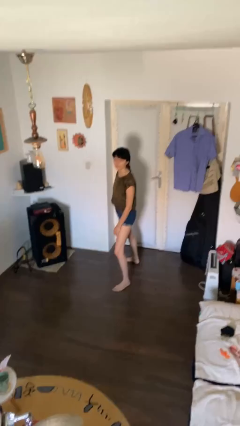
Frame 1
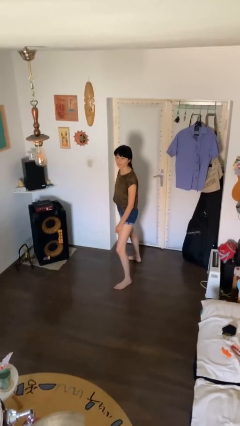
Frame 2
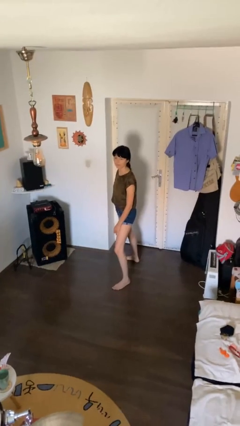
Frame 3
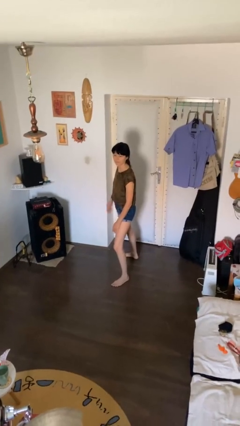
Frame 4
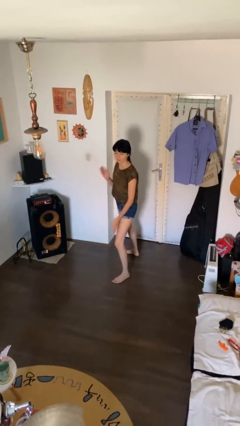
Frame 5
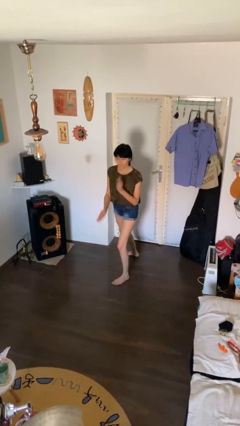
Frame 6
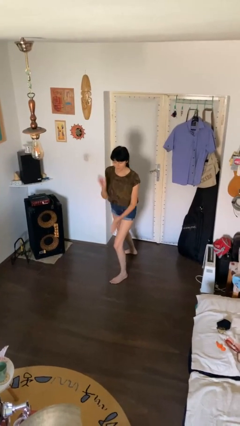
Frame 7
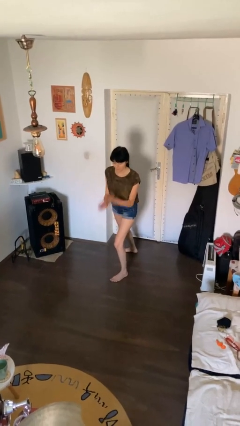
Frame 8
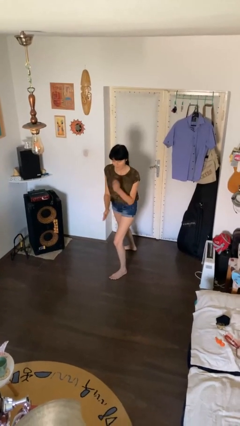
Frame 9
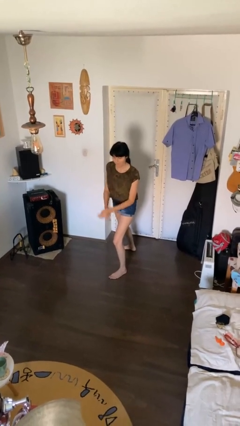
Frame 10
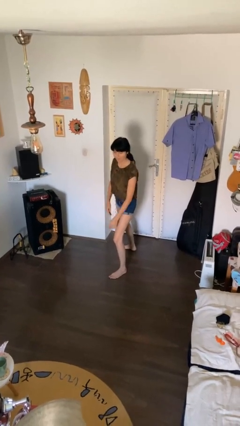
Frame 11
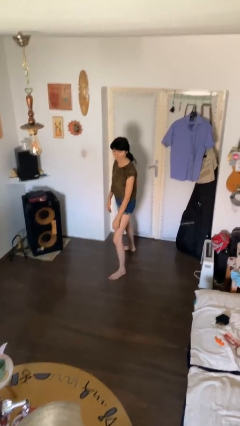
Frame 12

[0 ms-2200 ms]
person karate chop

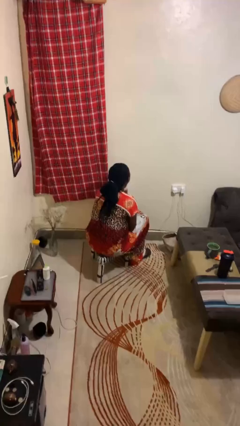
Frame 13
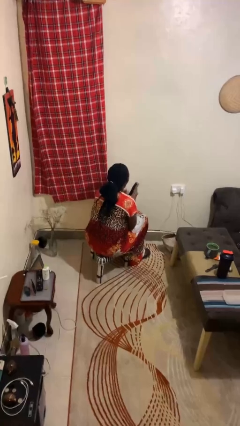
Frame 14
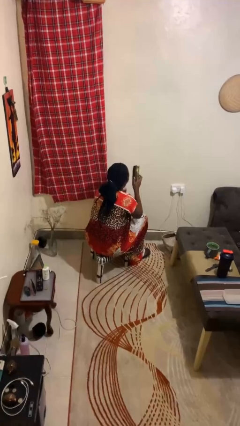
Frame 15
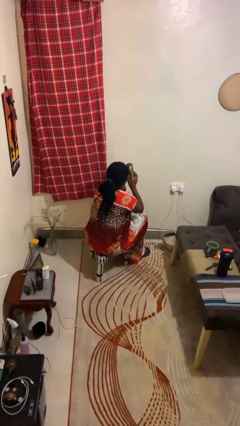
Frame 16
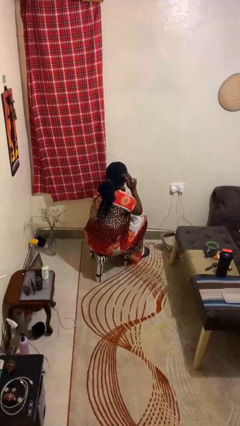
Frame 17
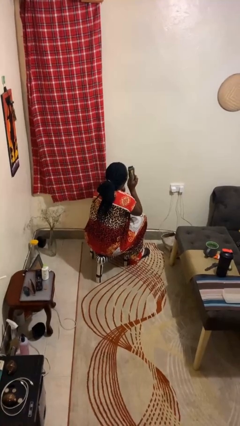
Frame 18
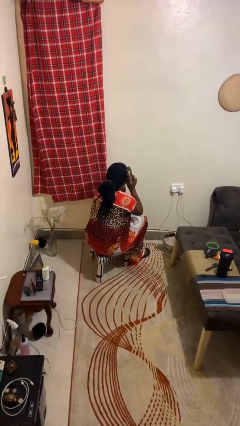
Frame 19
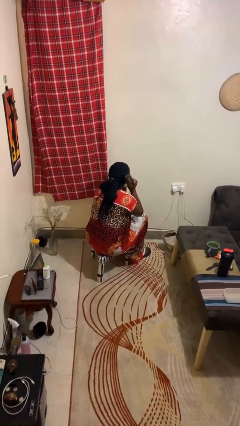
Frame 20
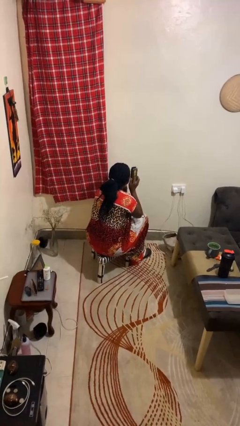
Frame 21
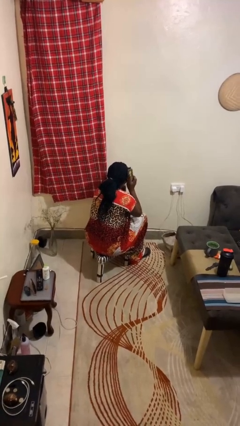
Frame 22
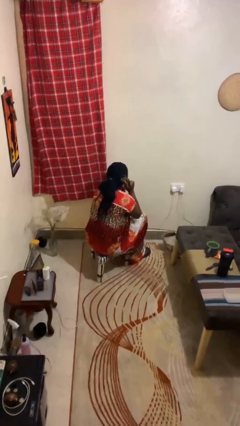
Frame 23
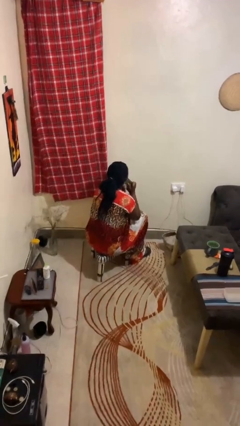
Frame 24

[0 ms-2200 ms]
person brushes hair

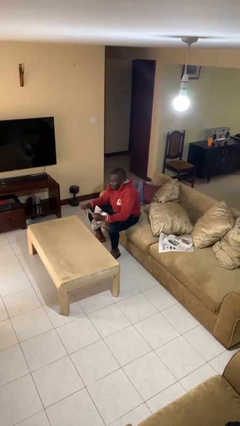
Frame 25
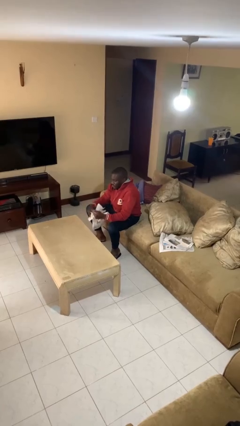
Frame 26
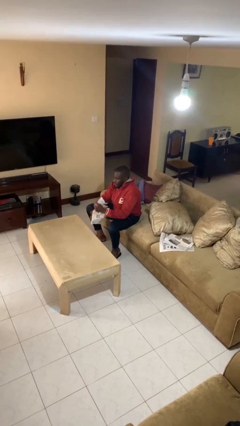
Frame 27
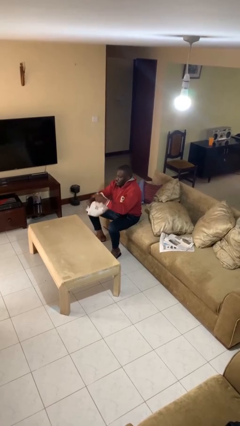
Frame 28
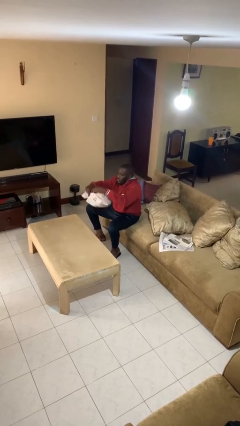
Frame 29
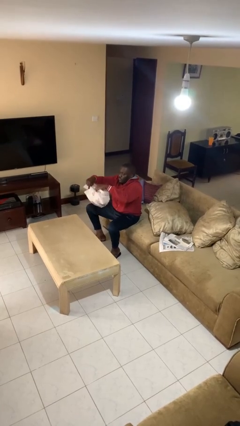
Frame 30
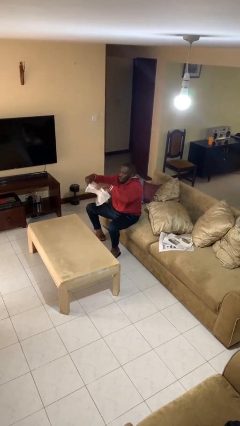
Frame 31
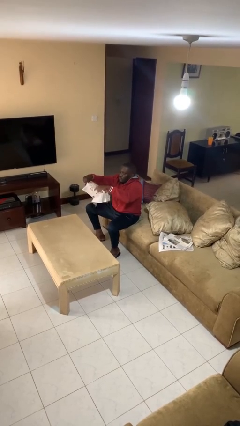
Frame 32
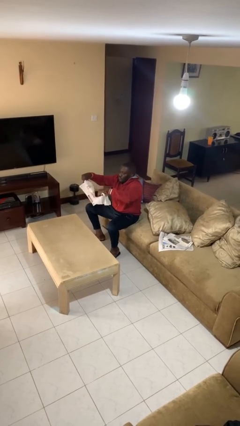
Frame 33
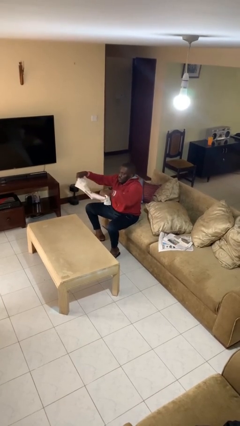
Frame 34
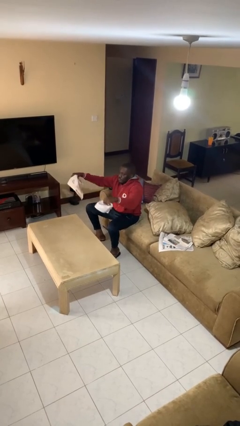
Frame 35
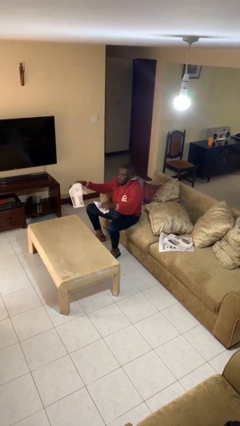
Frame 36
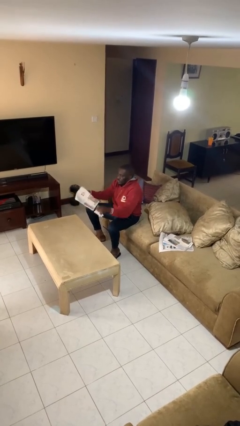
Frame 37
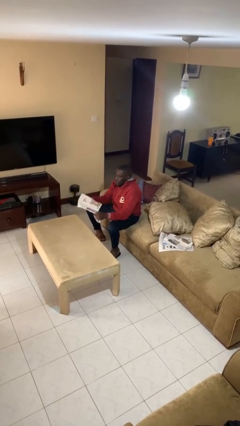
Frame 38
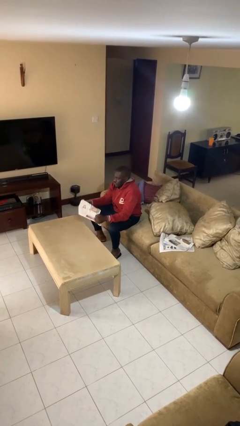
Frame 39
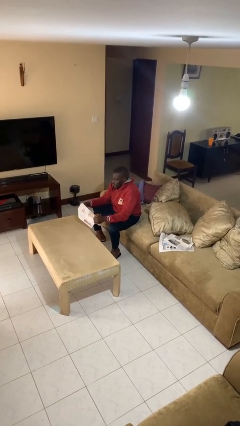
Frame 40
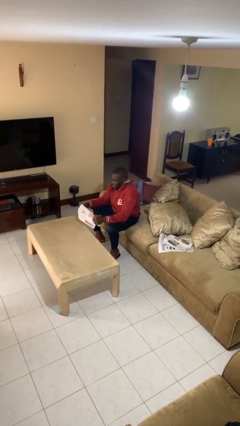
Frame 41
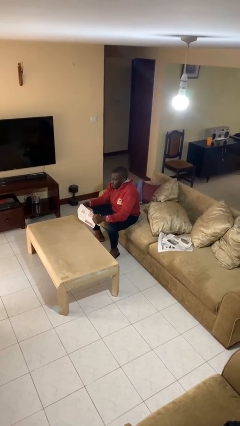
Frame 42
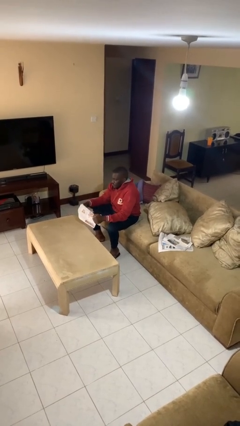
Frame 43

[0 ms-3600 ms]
person tears paper

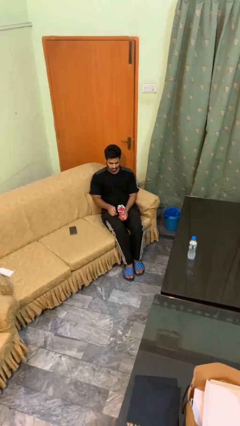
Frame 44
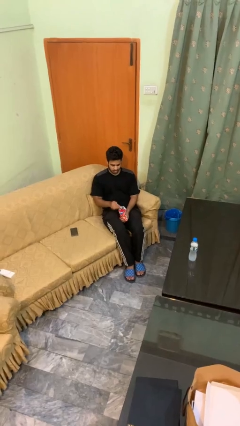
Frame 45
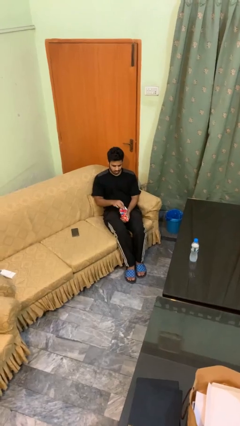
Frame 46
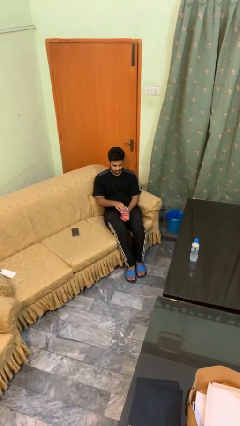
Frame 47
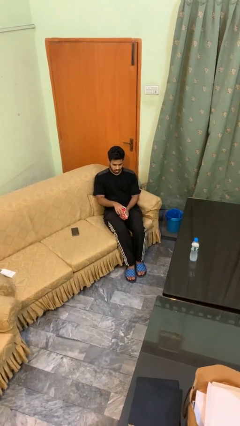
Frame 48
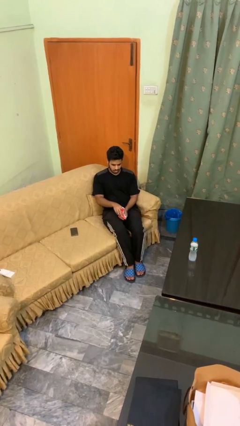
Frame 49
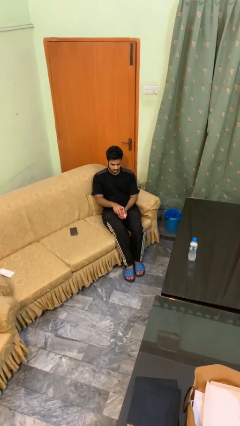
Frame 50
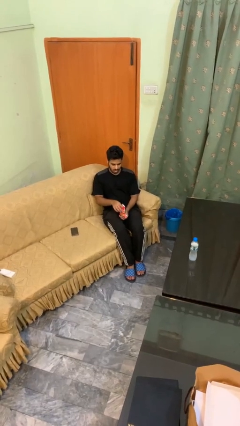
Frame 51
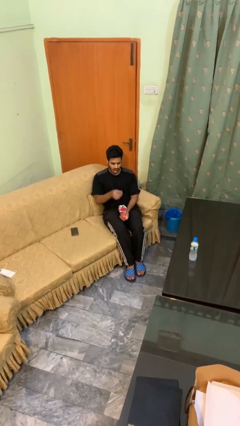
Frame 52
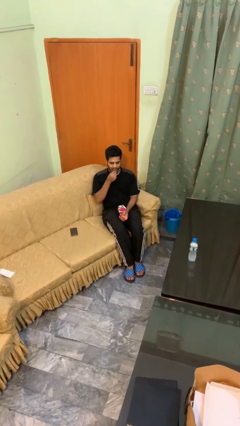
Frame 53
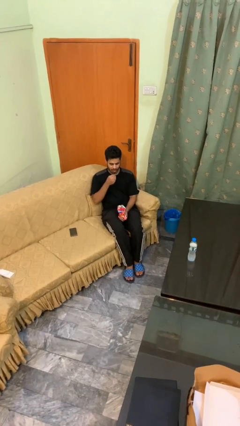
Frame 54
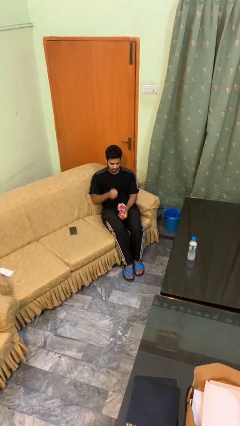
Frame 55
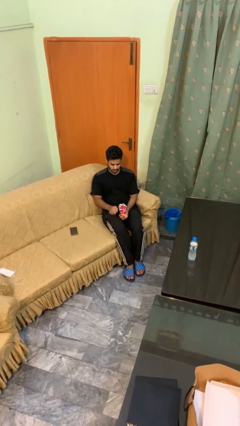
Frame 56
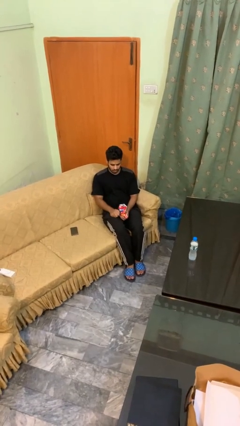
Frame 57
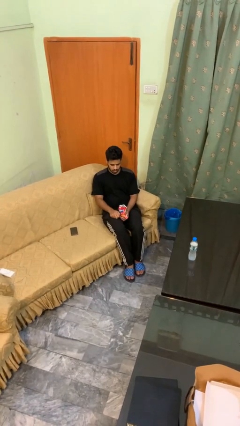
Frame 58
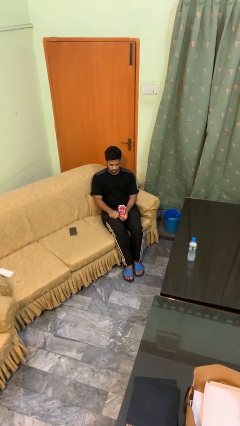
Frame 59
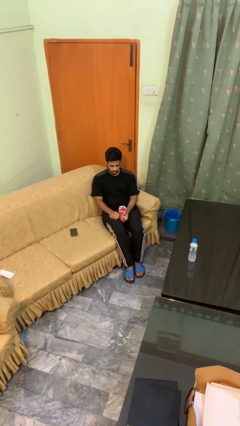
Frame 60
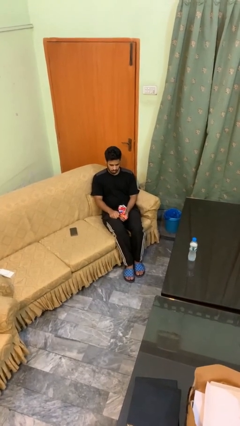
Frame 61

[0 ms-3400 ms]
person eats snack from bag

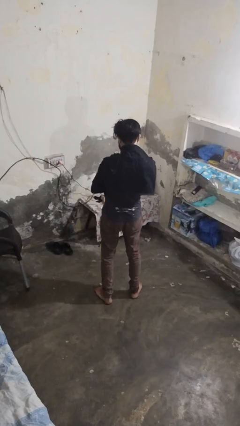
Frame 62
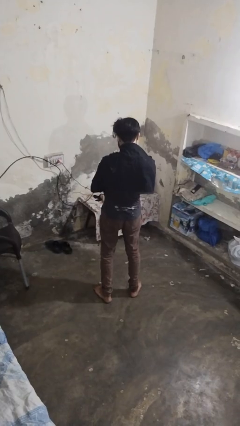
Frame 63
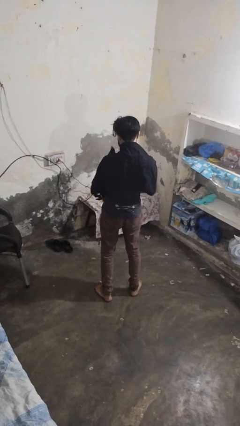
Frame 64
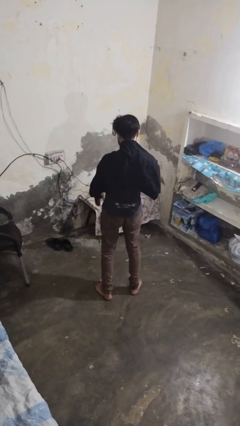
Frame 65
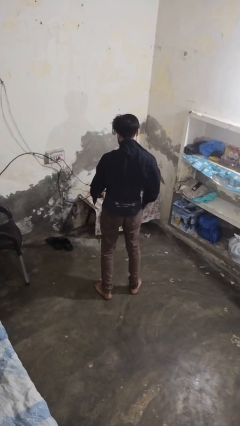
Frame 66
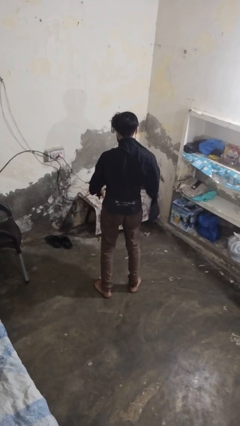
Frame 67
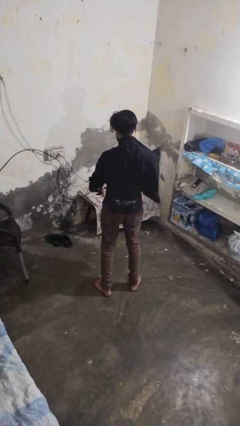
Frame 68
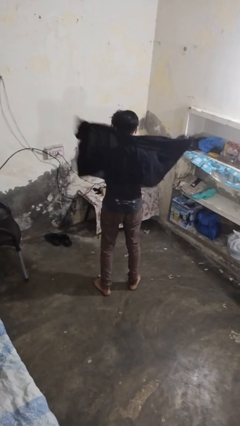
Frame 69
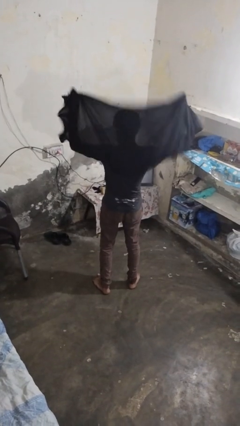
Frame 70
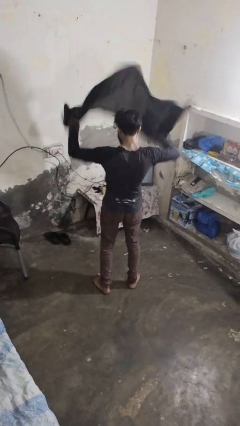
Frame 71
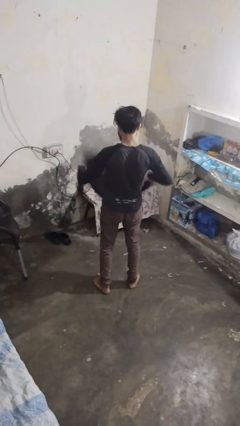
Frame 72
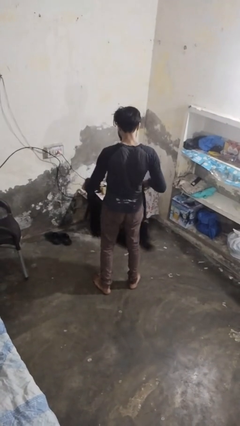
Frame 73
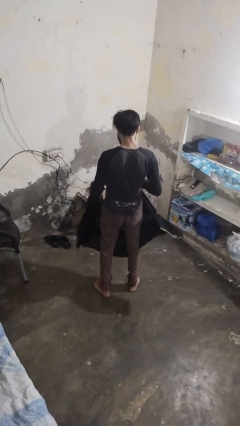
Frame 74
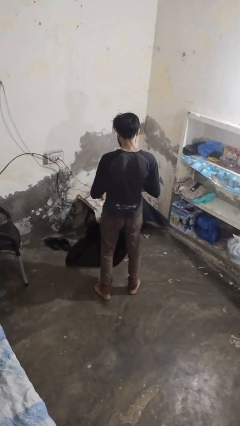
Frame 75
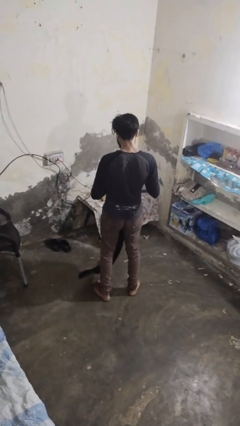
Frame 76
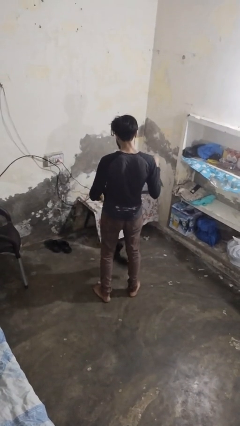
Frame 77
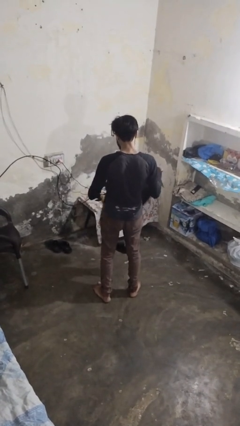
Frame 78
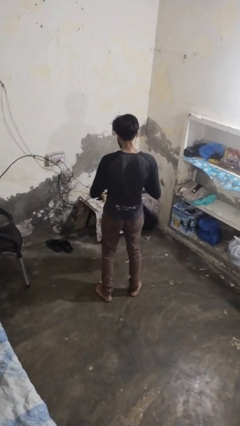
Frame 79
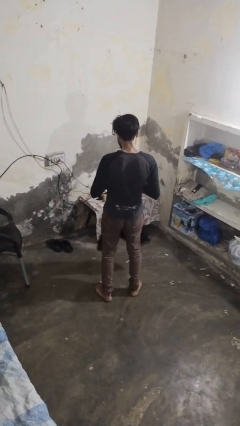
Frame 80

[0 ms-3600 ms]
person takes off scarf

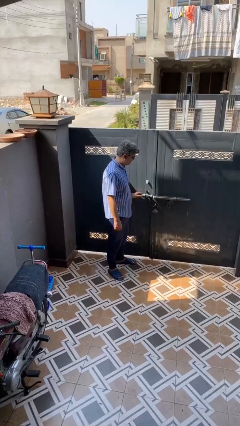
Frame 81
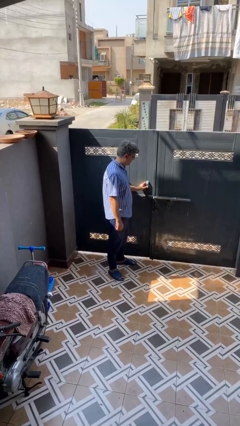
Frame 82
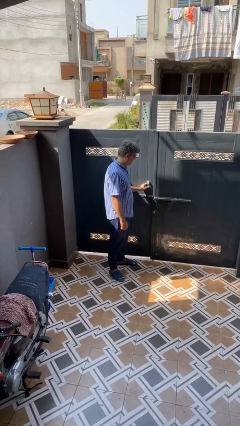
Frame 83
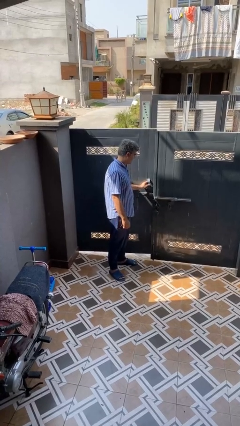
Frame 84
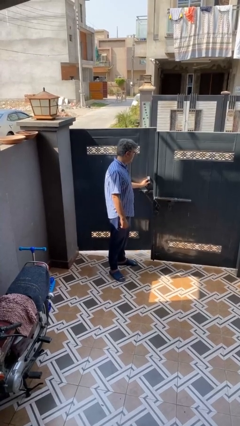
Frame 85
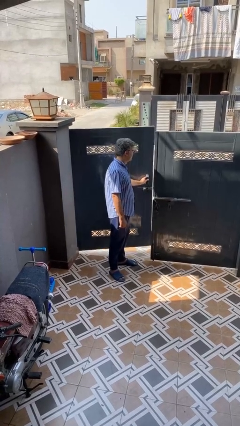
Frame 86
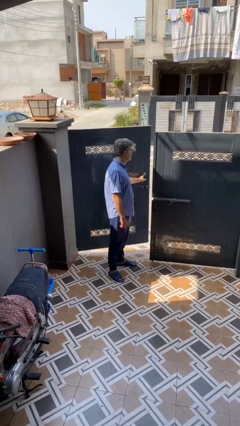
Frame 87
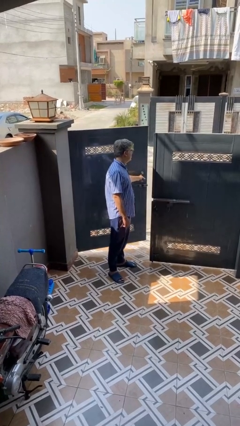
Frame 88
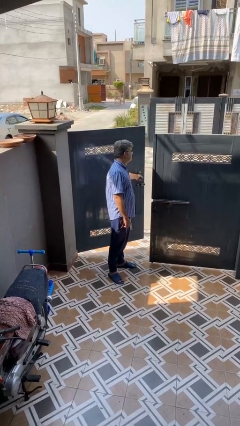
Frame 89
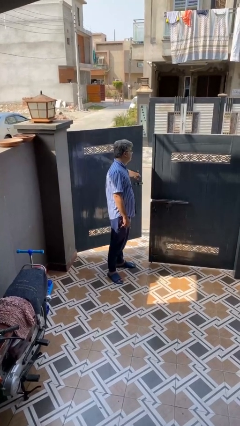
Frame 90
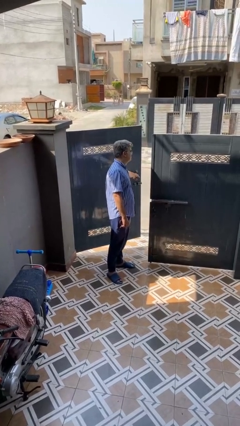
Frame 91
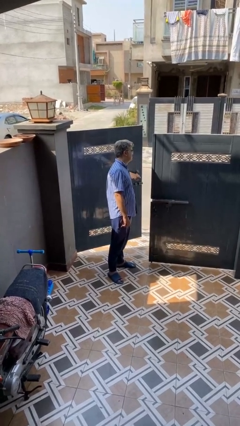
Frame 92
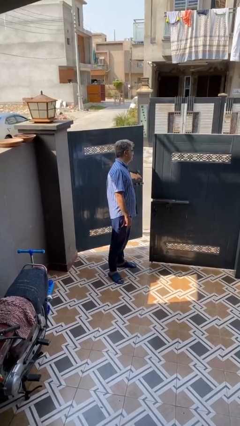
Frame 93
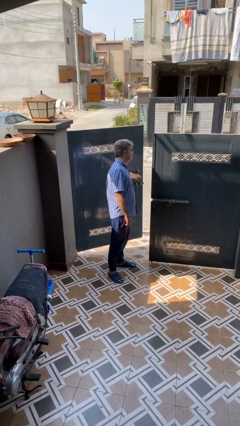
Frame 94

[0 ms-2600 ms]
person opens gate
